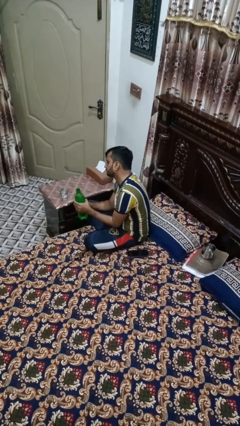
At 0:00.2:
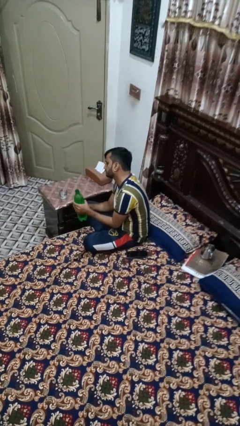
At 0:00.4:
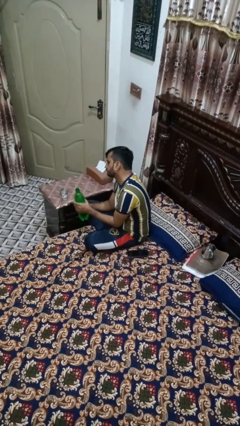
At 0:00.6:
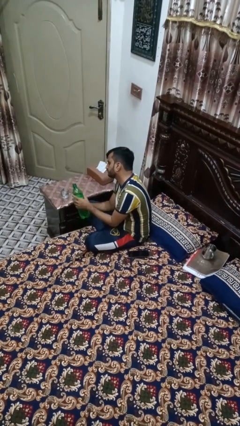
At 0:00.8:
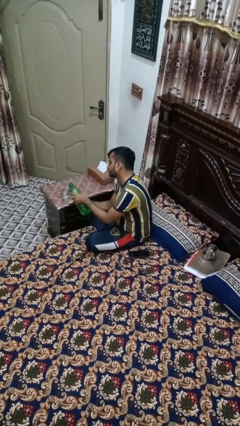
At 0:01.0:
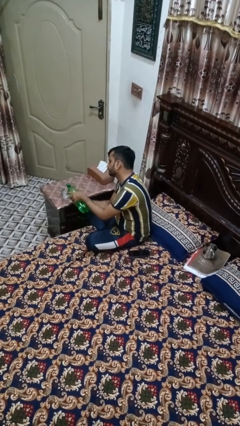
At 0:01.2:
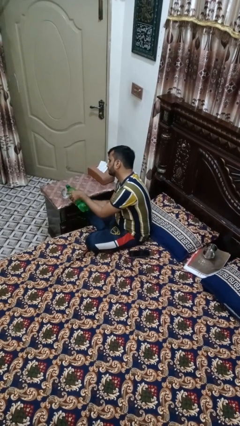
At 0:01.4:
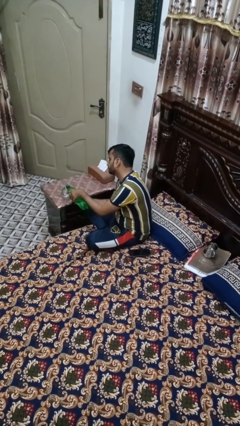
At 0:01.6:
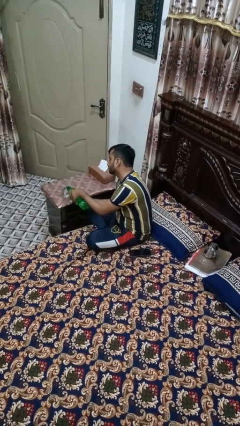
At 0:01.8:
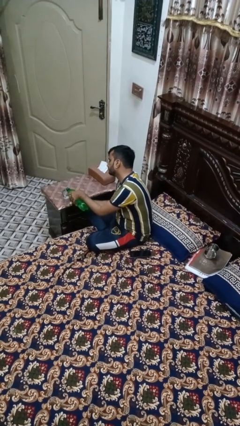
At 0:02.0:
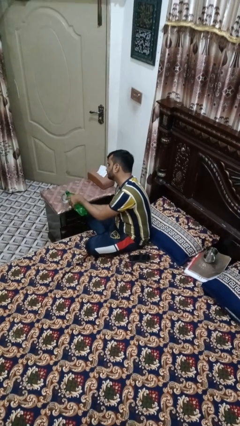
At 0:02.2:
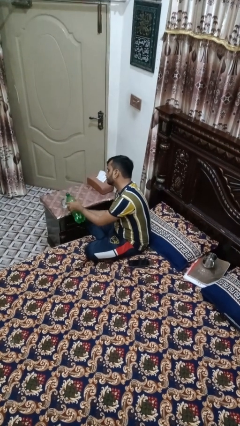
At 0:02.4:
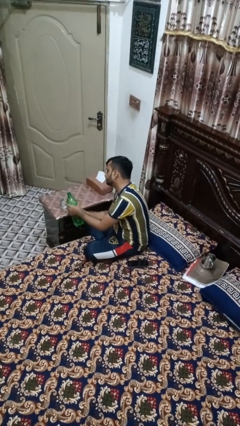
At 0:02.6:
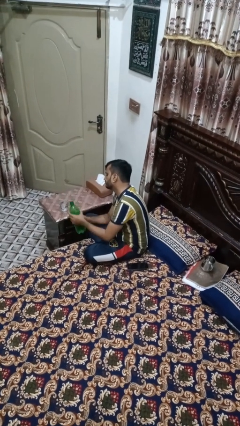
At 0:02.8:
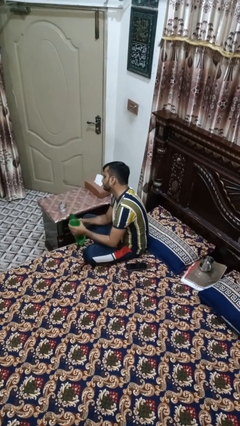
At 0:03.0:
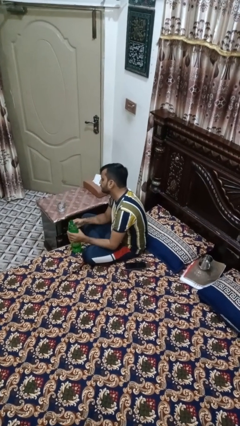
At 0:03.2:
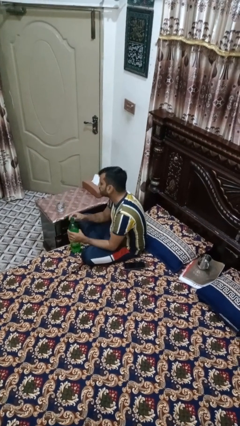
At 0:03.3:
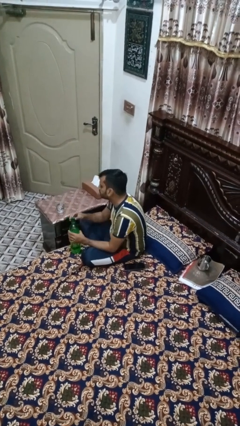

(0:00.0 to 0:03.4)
person pours liquid into cup

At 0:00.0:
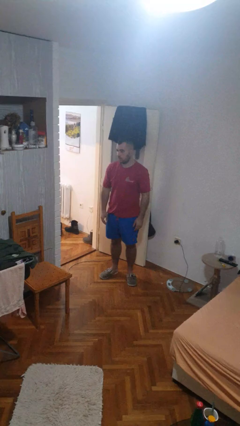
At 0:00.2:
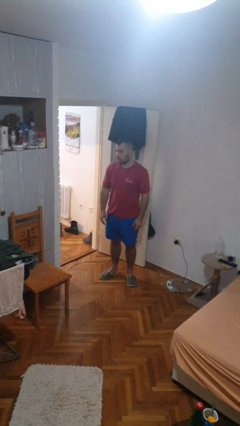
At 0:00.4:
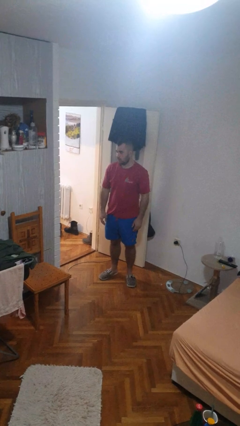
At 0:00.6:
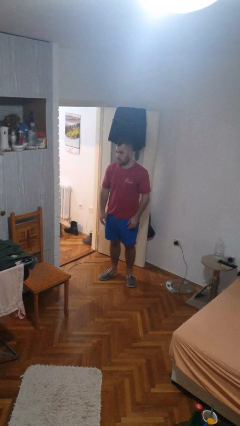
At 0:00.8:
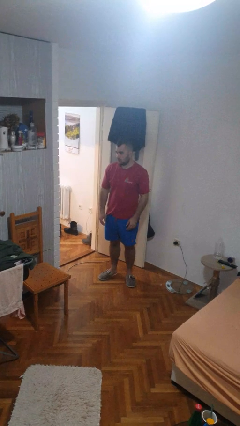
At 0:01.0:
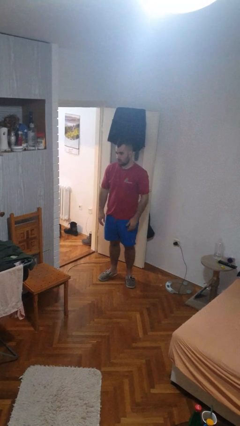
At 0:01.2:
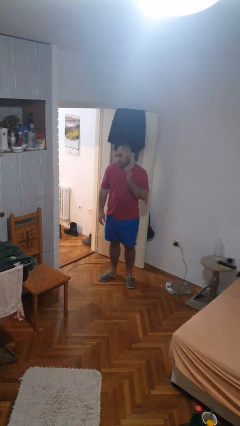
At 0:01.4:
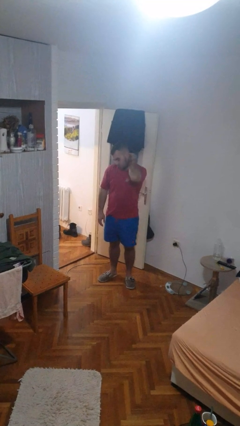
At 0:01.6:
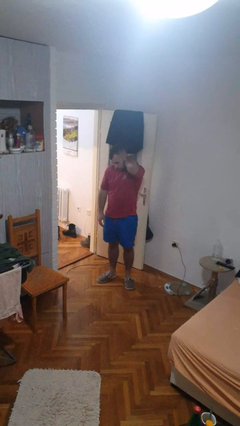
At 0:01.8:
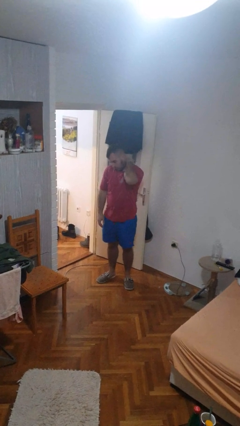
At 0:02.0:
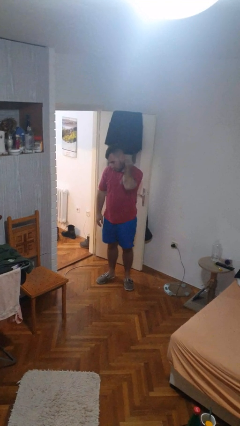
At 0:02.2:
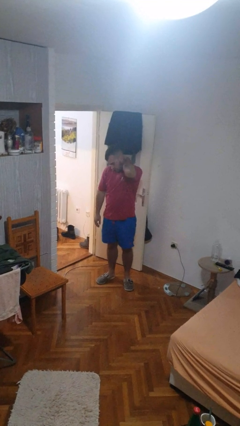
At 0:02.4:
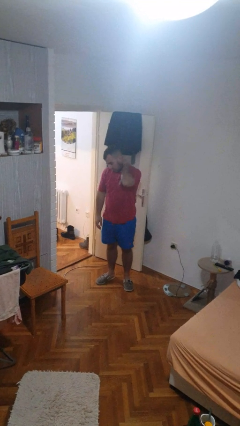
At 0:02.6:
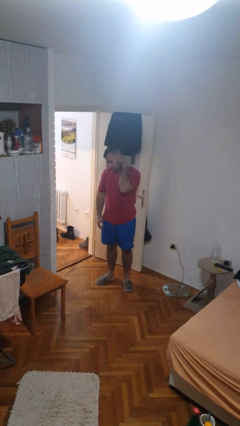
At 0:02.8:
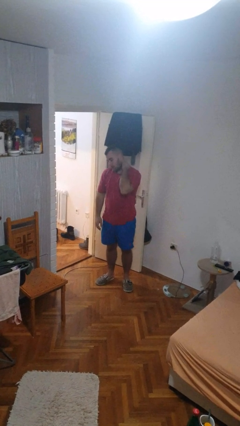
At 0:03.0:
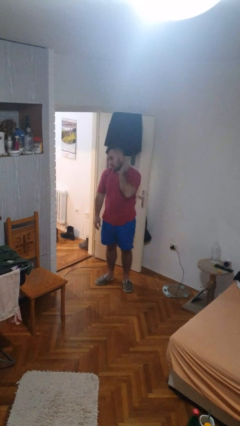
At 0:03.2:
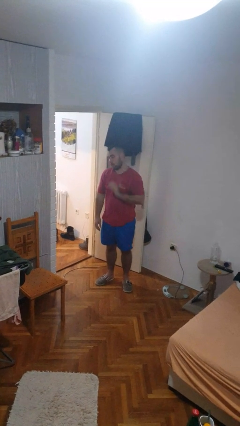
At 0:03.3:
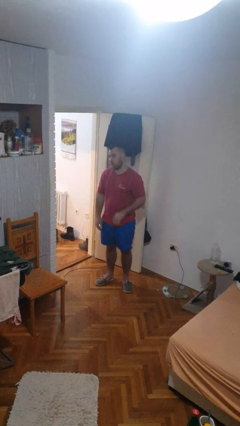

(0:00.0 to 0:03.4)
person rubs neck

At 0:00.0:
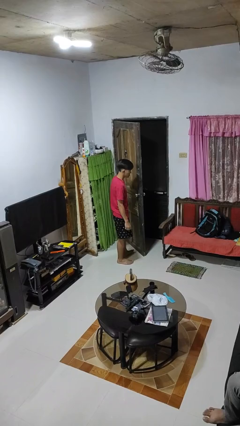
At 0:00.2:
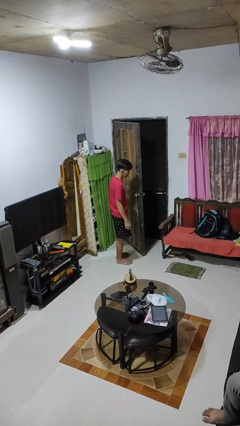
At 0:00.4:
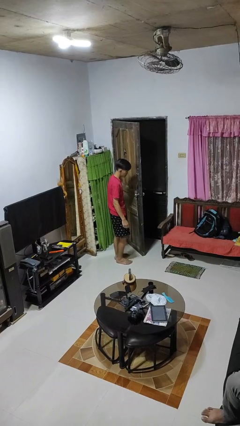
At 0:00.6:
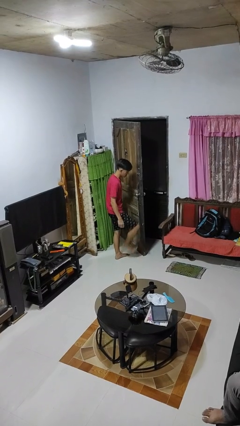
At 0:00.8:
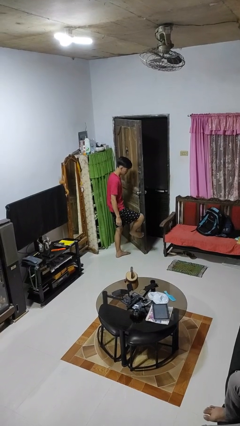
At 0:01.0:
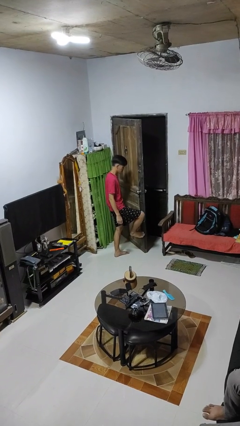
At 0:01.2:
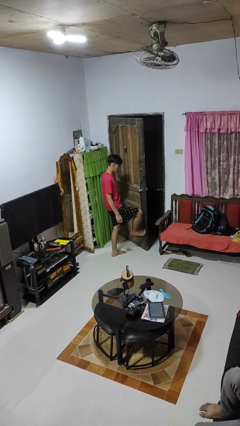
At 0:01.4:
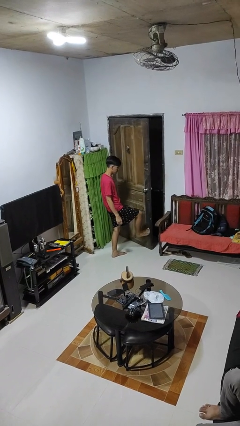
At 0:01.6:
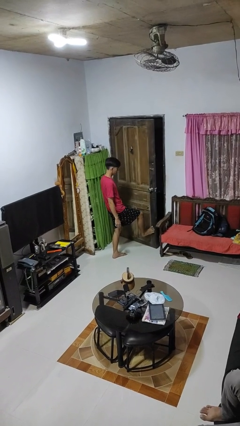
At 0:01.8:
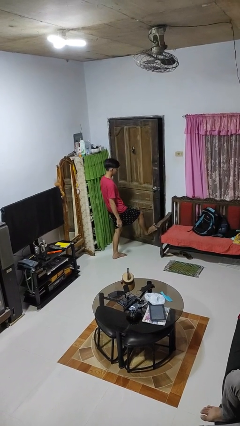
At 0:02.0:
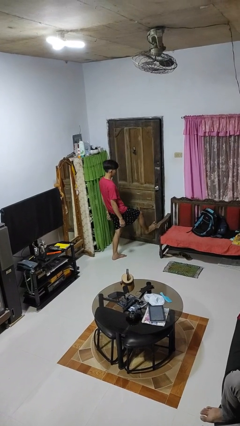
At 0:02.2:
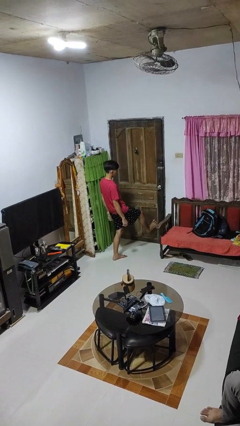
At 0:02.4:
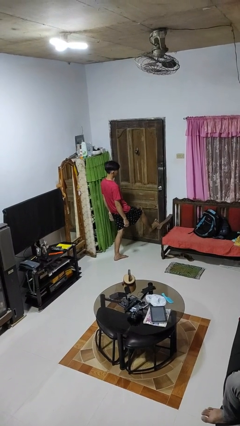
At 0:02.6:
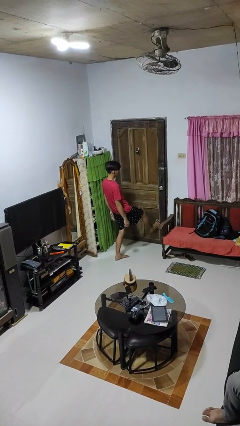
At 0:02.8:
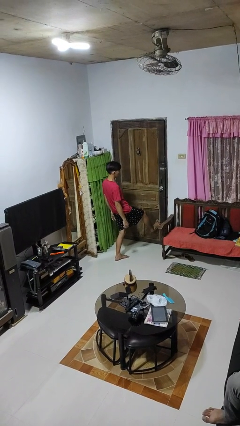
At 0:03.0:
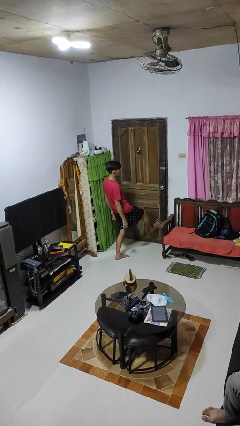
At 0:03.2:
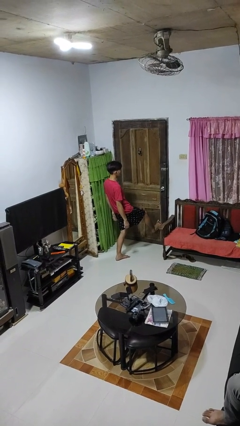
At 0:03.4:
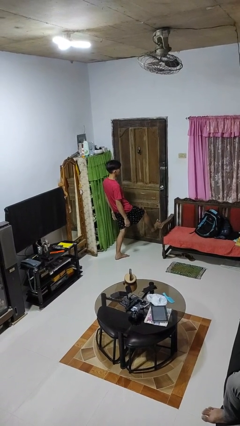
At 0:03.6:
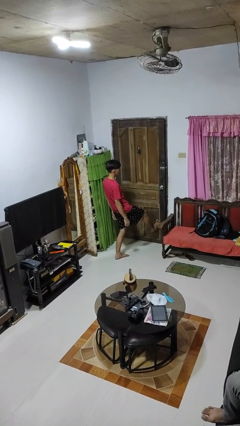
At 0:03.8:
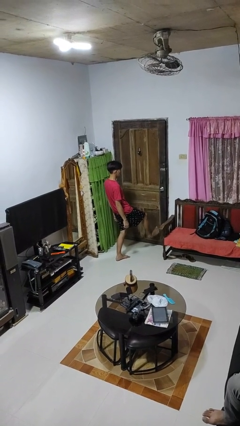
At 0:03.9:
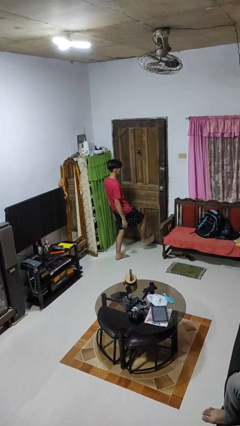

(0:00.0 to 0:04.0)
person closes door with foot

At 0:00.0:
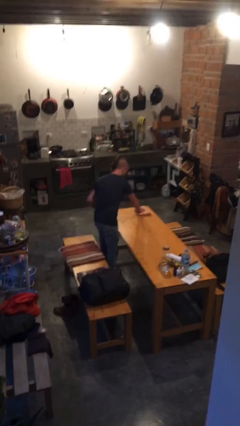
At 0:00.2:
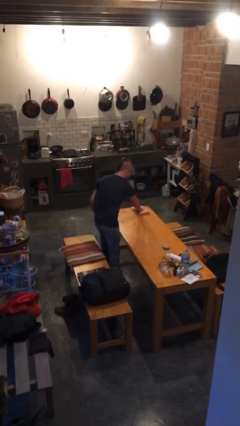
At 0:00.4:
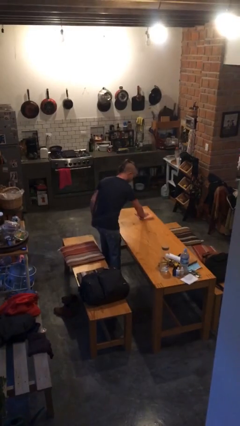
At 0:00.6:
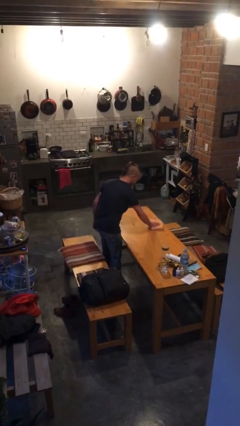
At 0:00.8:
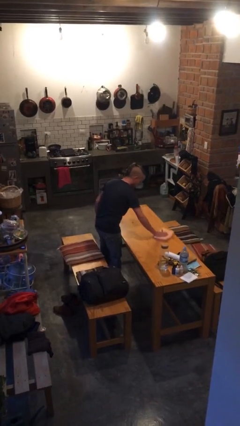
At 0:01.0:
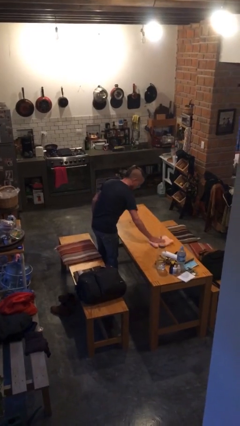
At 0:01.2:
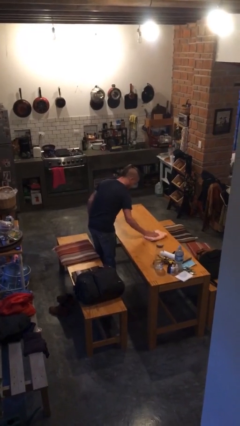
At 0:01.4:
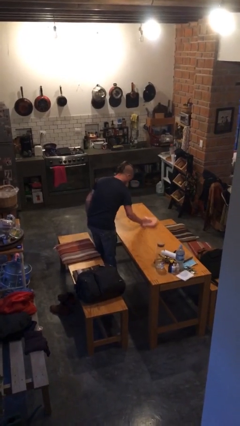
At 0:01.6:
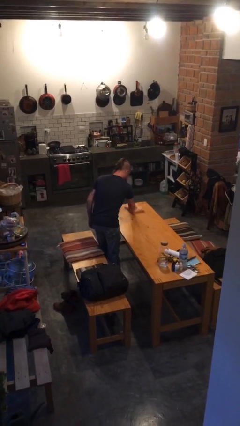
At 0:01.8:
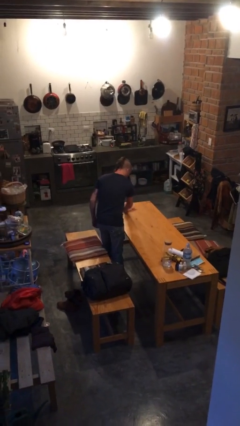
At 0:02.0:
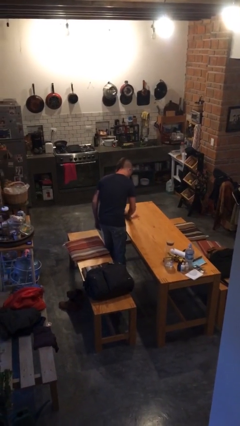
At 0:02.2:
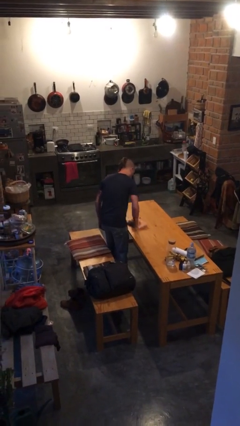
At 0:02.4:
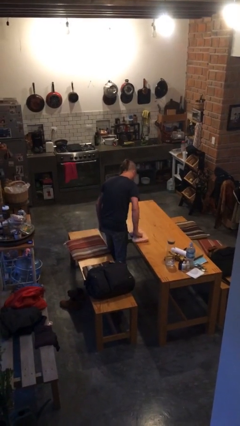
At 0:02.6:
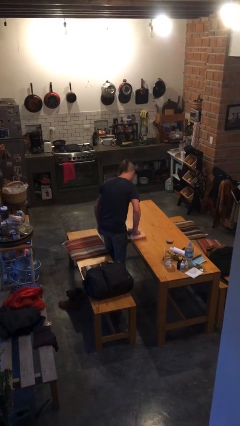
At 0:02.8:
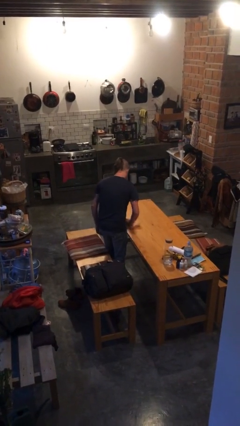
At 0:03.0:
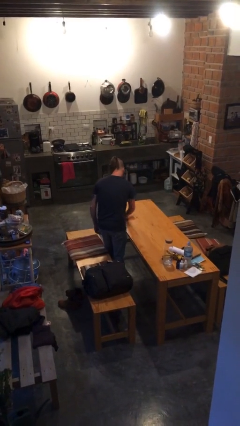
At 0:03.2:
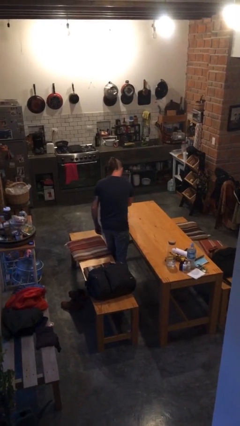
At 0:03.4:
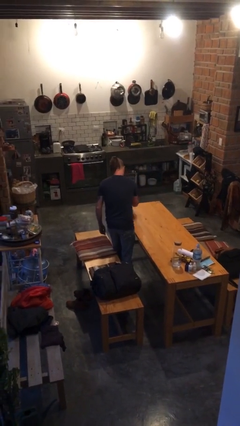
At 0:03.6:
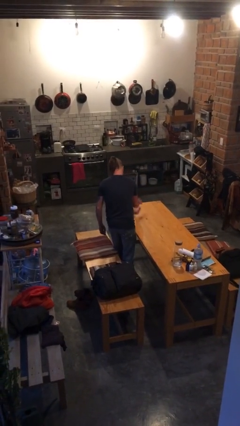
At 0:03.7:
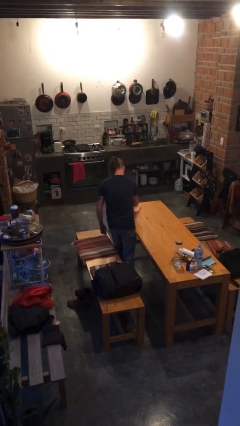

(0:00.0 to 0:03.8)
person cleans table with rag

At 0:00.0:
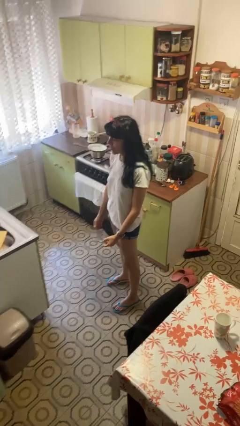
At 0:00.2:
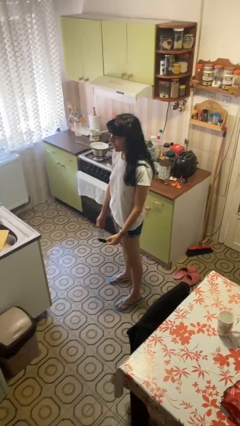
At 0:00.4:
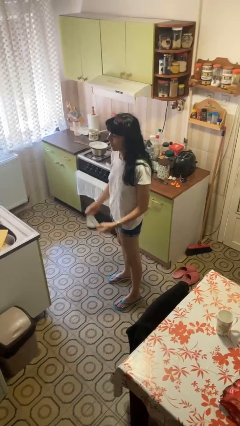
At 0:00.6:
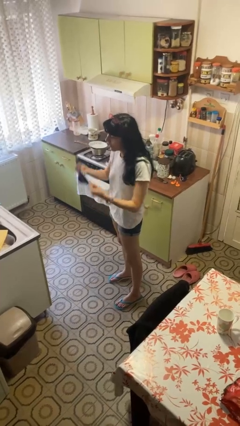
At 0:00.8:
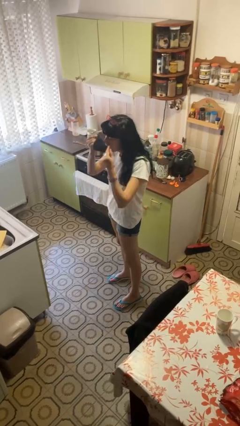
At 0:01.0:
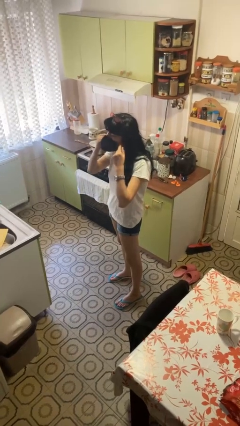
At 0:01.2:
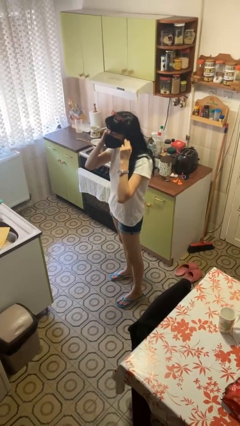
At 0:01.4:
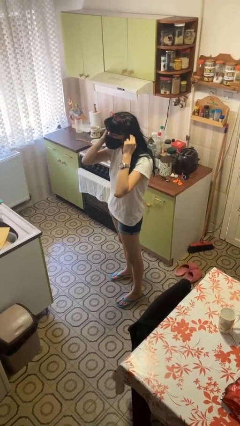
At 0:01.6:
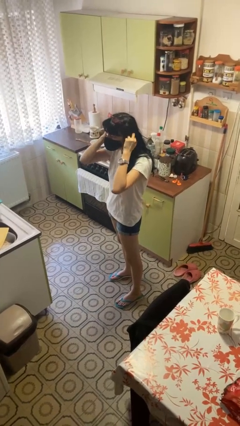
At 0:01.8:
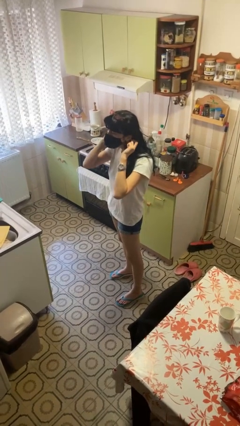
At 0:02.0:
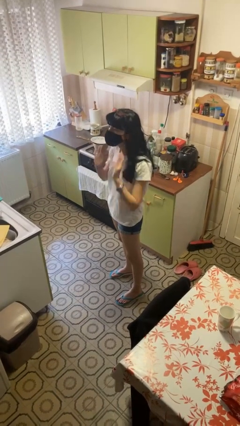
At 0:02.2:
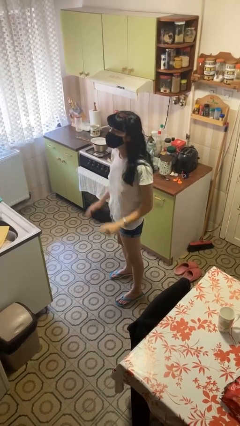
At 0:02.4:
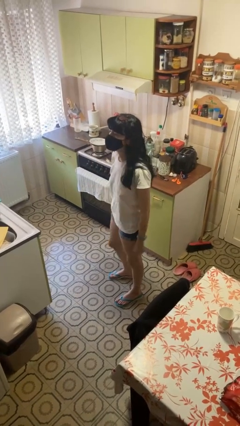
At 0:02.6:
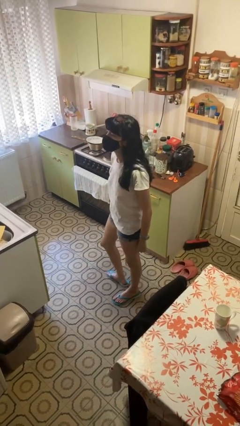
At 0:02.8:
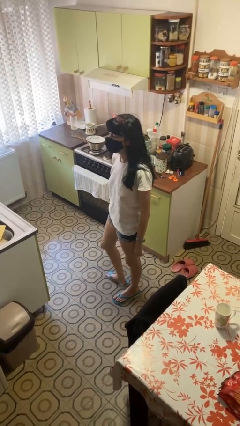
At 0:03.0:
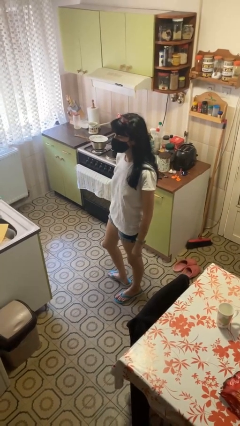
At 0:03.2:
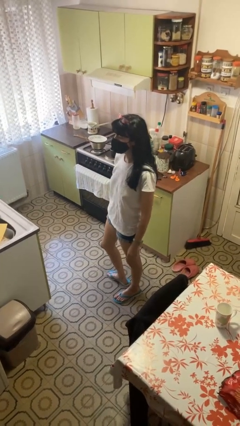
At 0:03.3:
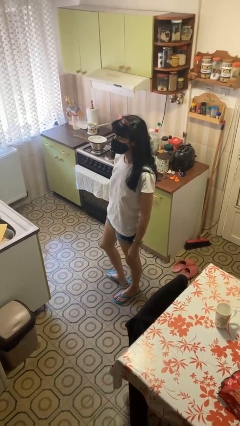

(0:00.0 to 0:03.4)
person puts on facemask
